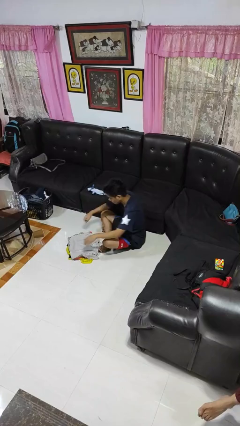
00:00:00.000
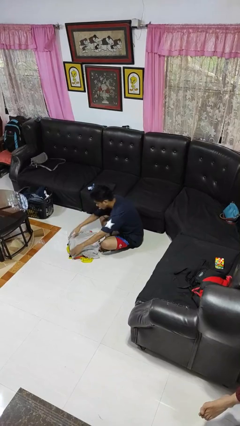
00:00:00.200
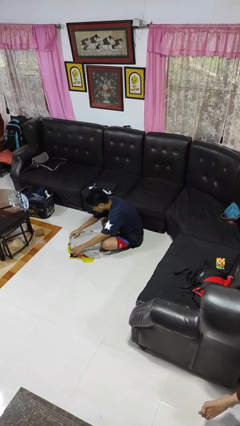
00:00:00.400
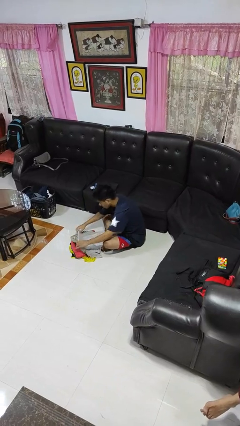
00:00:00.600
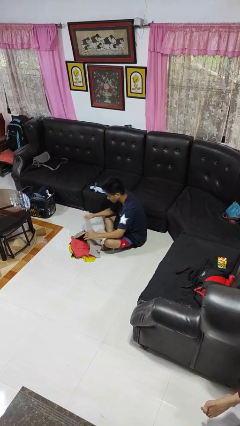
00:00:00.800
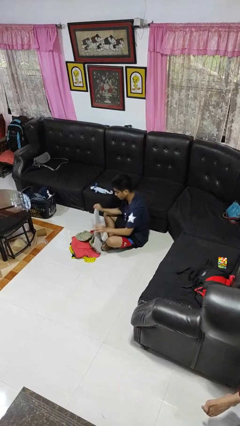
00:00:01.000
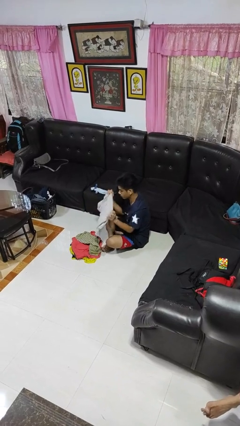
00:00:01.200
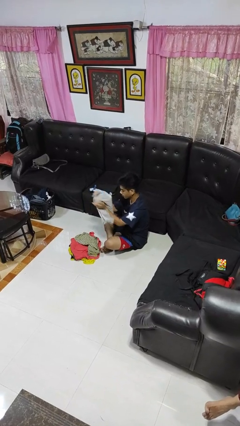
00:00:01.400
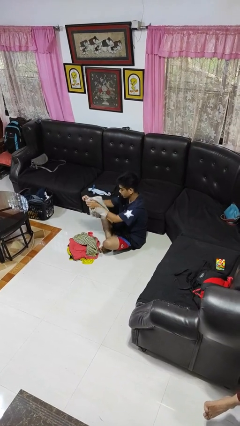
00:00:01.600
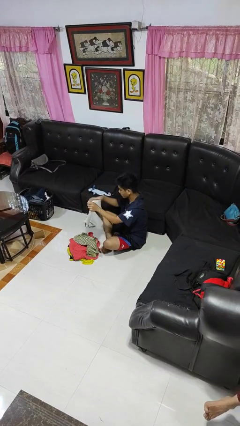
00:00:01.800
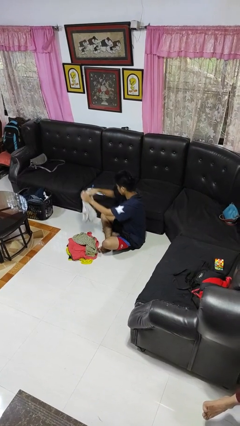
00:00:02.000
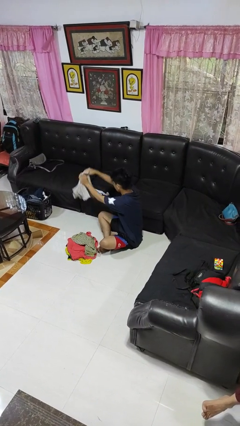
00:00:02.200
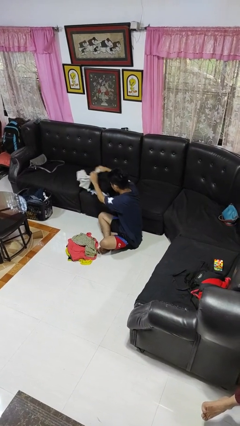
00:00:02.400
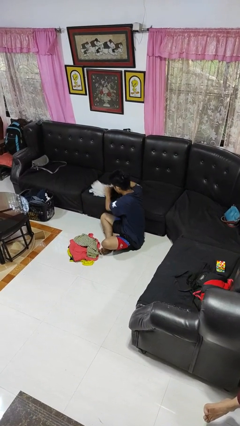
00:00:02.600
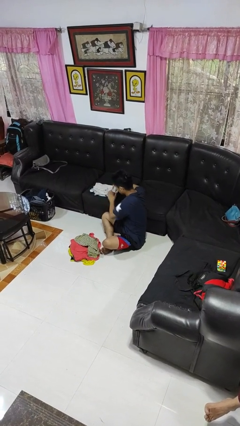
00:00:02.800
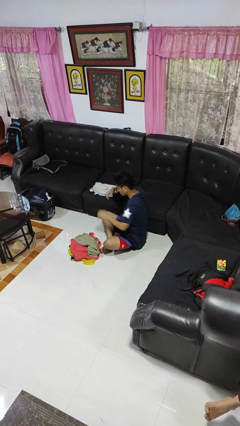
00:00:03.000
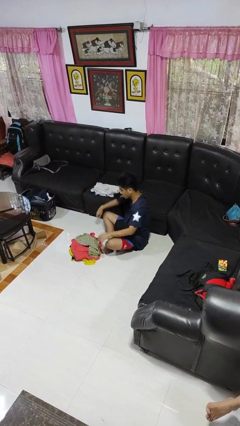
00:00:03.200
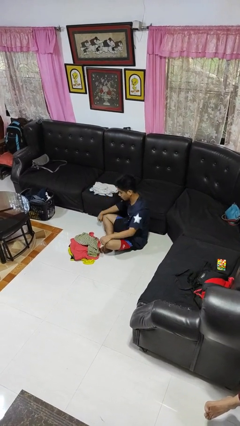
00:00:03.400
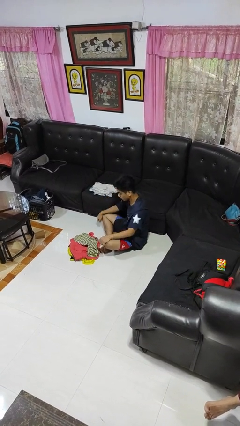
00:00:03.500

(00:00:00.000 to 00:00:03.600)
person folds shirt

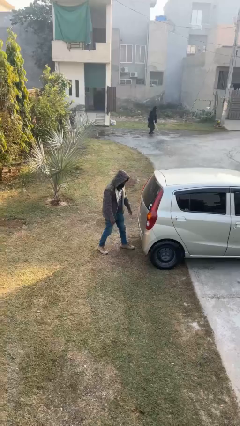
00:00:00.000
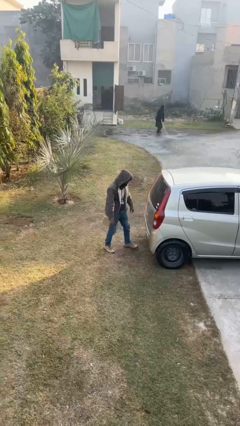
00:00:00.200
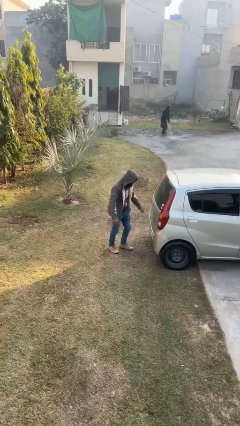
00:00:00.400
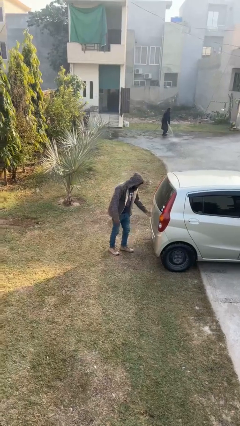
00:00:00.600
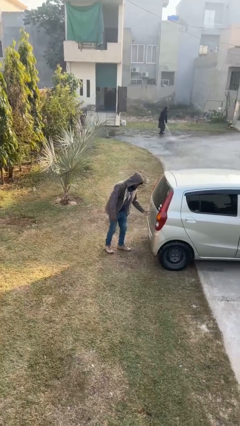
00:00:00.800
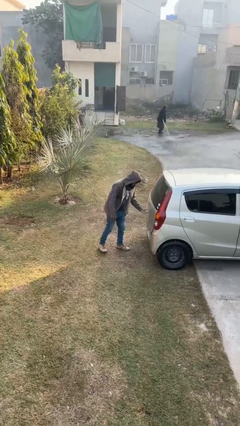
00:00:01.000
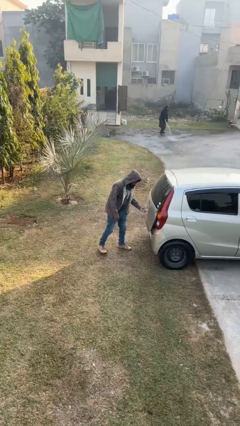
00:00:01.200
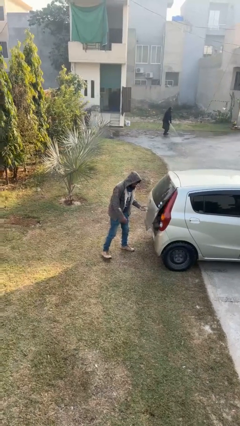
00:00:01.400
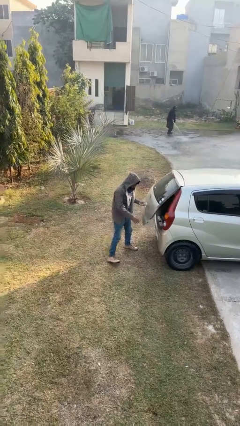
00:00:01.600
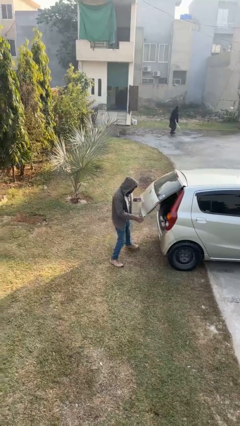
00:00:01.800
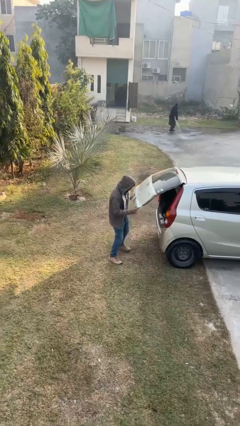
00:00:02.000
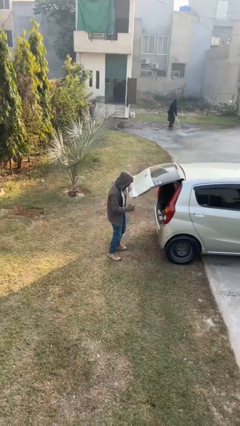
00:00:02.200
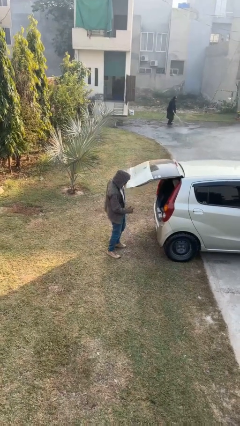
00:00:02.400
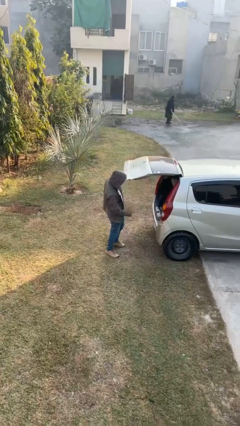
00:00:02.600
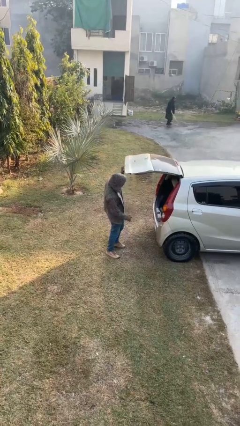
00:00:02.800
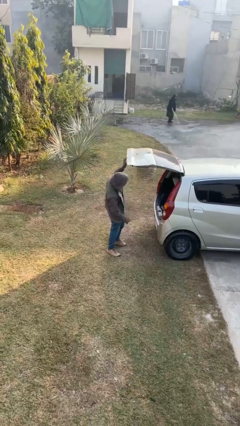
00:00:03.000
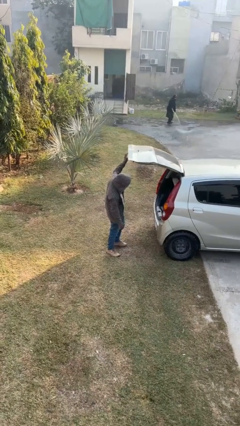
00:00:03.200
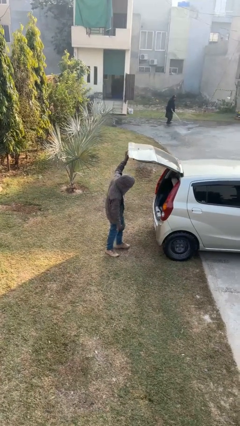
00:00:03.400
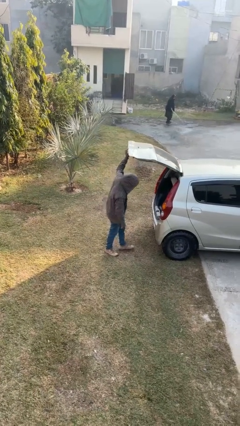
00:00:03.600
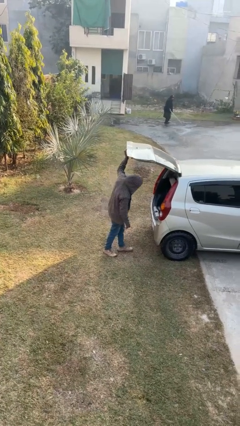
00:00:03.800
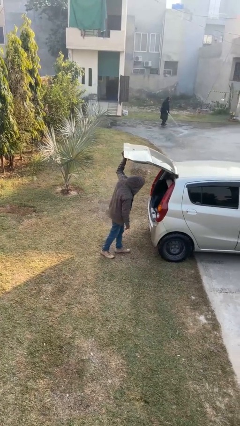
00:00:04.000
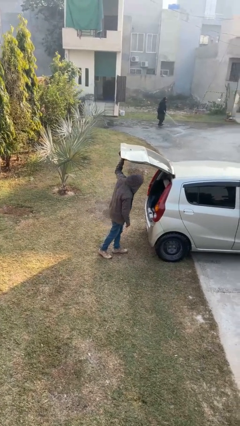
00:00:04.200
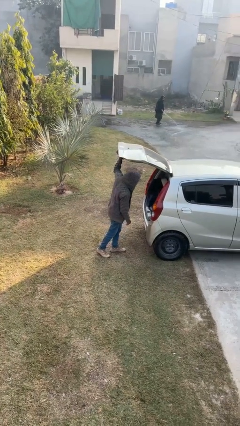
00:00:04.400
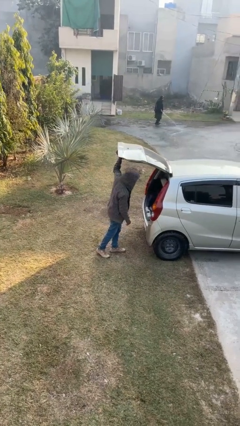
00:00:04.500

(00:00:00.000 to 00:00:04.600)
person opens car trunk

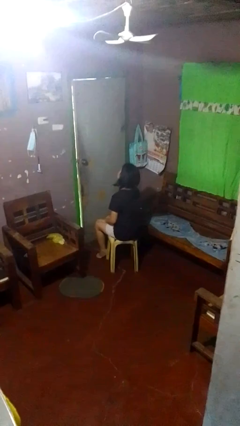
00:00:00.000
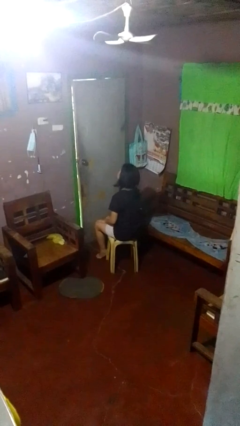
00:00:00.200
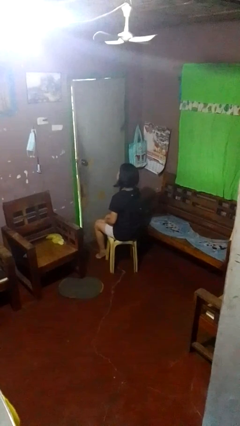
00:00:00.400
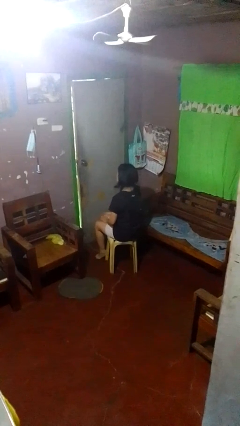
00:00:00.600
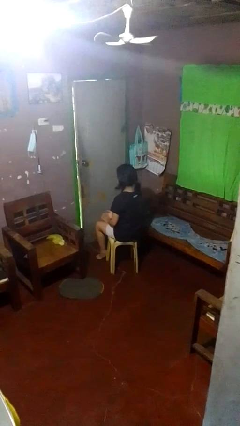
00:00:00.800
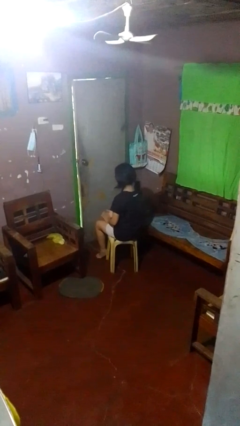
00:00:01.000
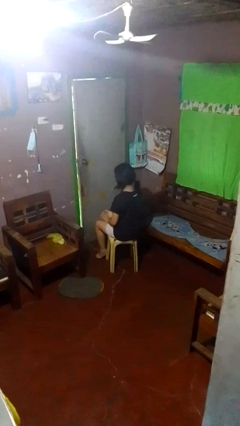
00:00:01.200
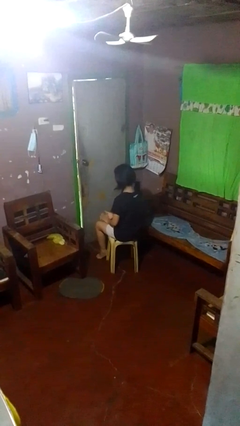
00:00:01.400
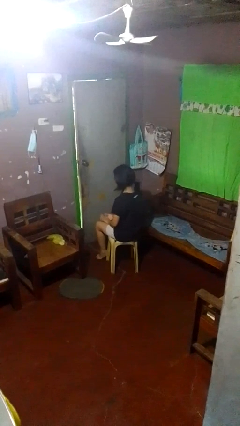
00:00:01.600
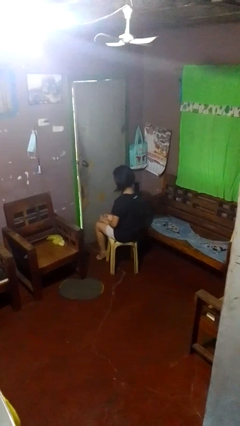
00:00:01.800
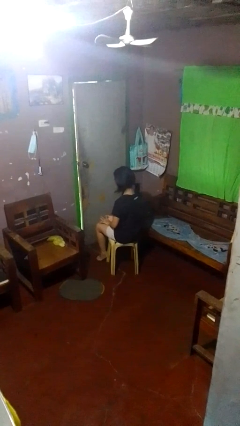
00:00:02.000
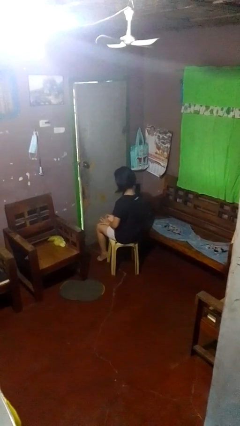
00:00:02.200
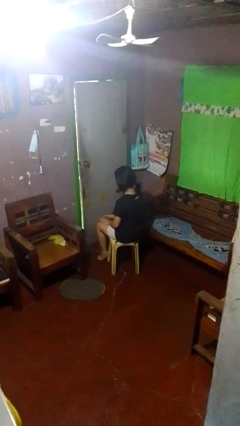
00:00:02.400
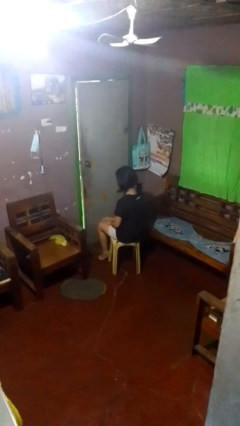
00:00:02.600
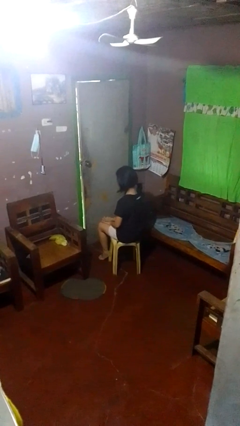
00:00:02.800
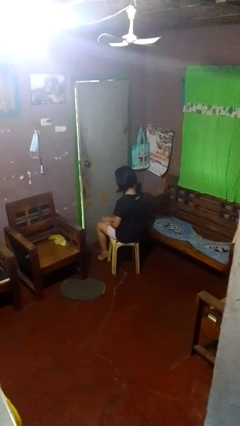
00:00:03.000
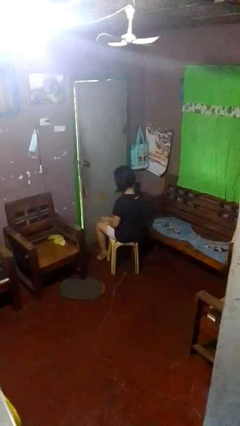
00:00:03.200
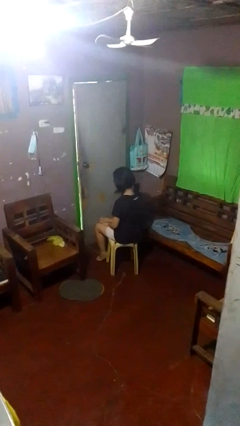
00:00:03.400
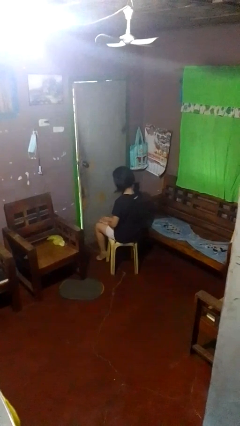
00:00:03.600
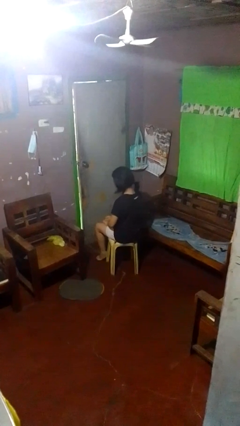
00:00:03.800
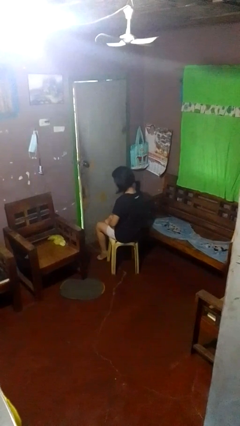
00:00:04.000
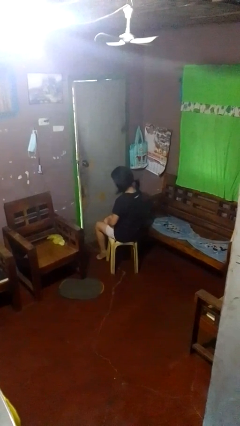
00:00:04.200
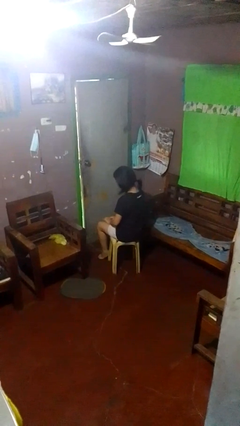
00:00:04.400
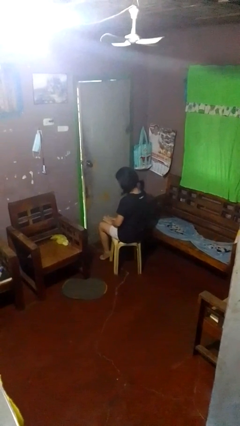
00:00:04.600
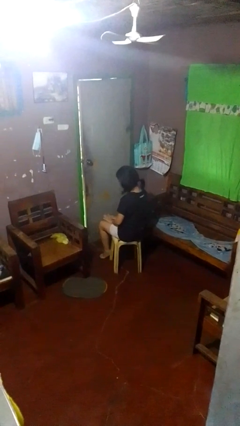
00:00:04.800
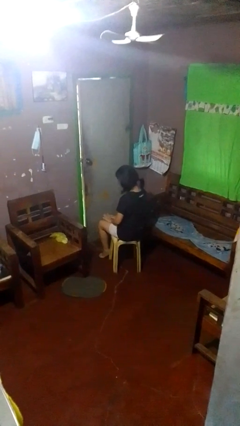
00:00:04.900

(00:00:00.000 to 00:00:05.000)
person looks at hands in lap

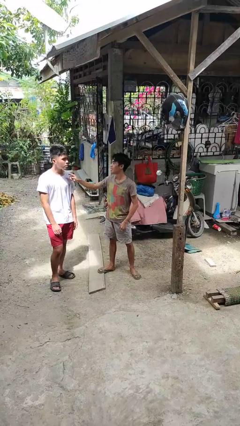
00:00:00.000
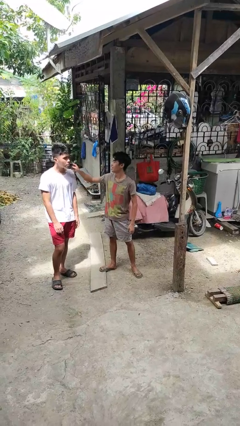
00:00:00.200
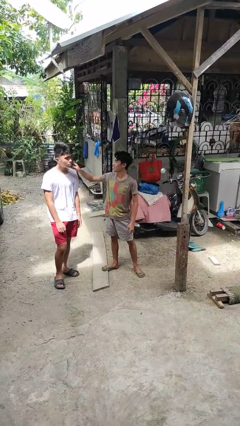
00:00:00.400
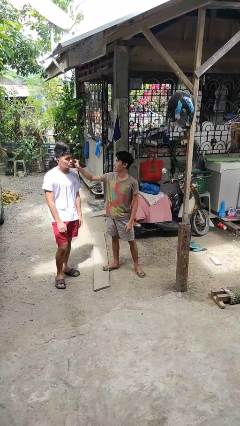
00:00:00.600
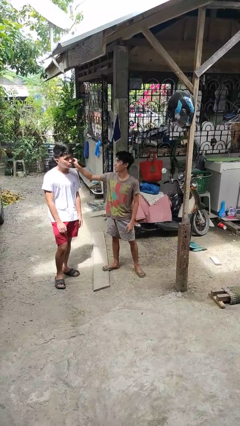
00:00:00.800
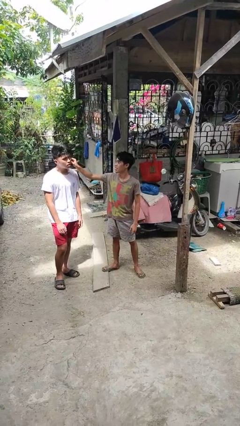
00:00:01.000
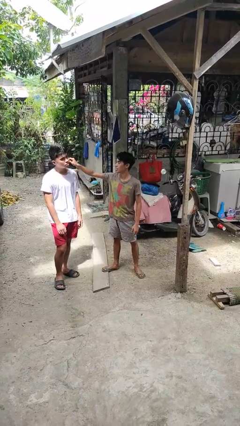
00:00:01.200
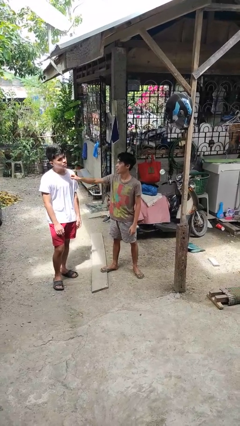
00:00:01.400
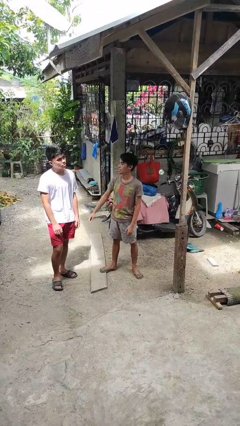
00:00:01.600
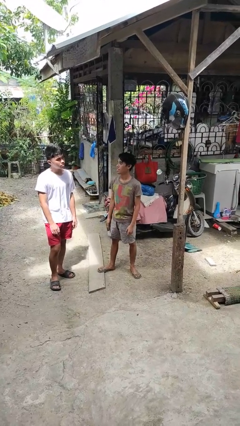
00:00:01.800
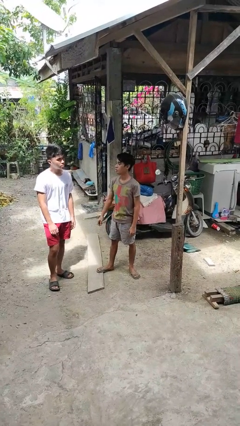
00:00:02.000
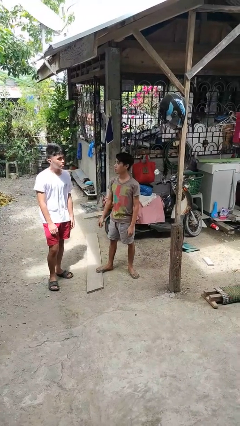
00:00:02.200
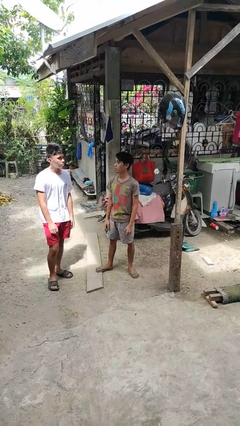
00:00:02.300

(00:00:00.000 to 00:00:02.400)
person touches face of person

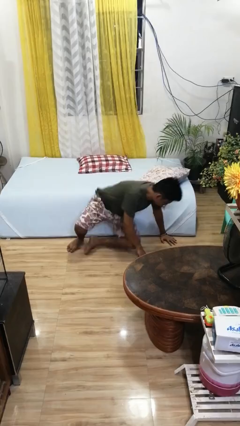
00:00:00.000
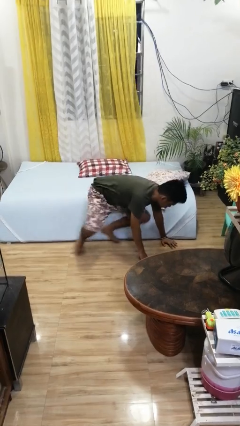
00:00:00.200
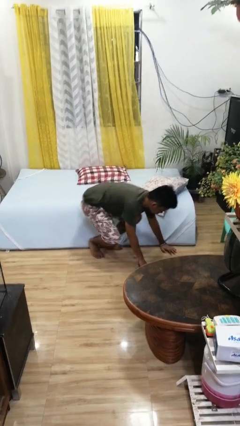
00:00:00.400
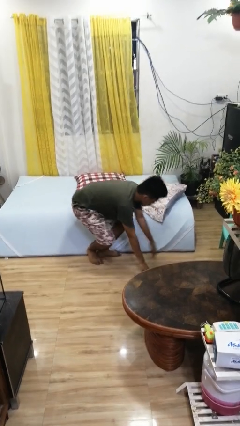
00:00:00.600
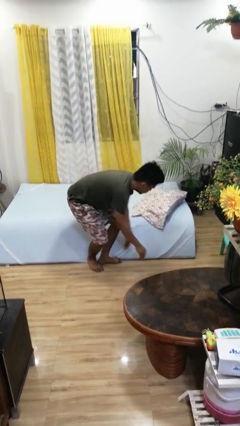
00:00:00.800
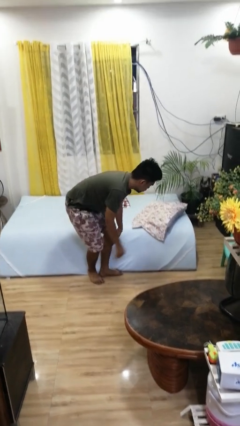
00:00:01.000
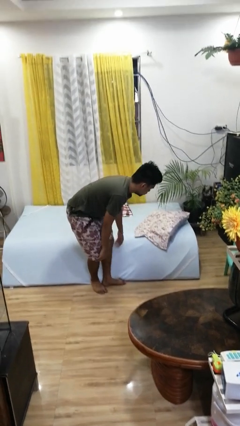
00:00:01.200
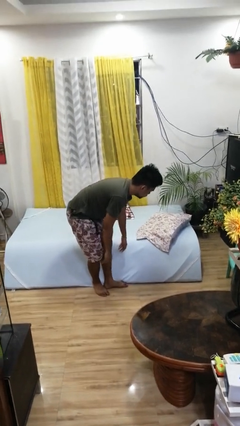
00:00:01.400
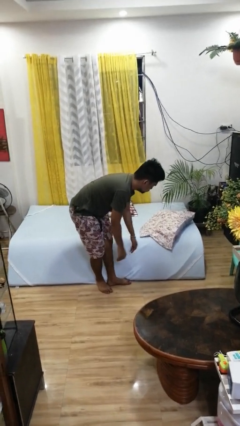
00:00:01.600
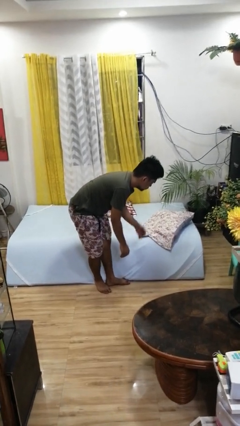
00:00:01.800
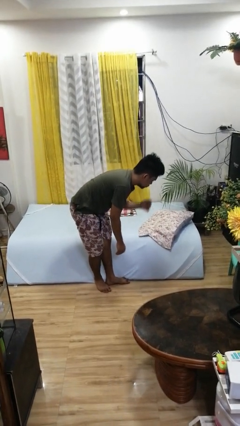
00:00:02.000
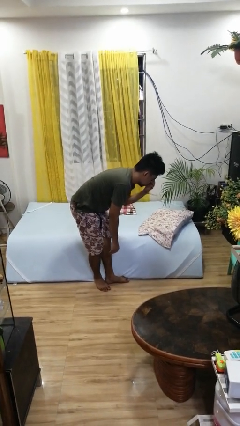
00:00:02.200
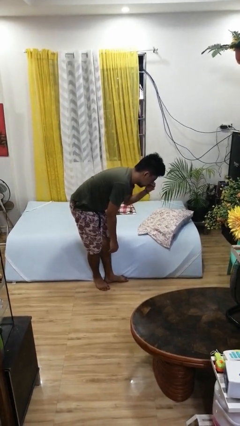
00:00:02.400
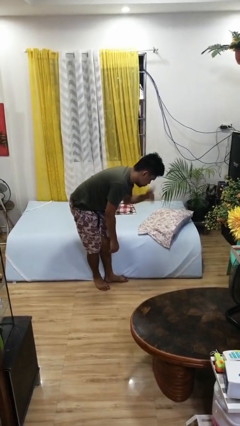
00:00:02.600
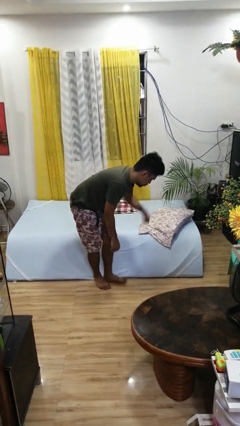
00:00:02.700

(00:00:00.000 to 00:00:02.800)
person stands up from floor
